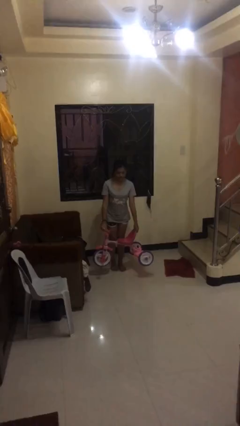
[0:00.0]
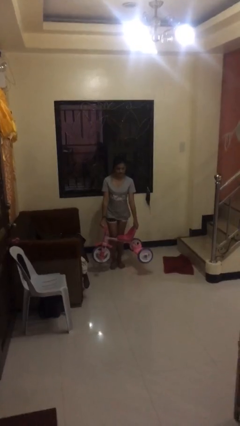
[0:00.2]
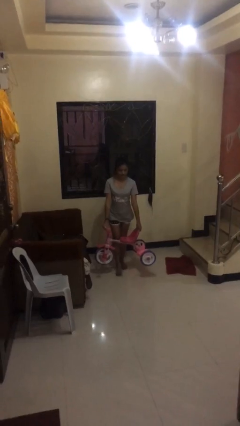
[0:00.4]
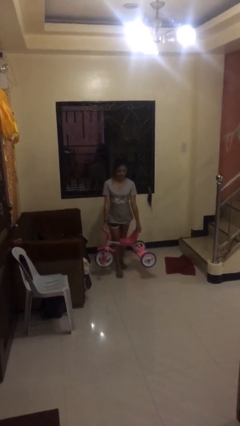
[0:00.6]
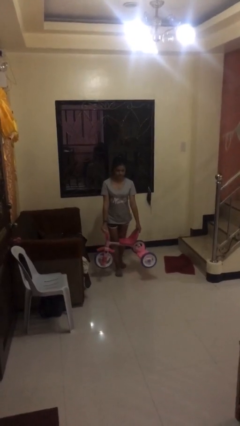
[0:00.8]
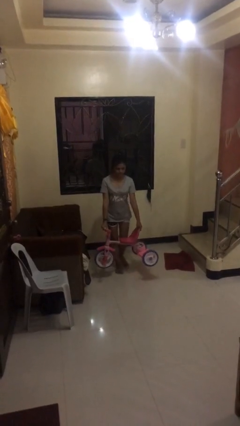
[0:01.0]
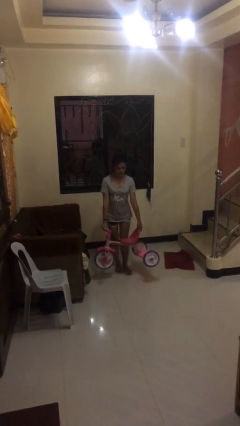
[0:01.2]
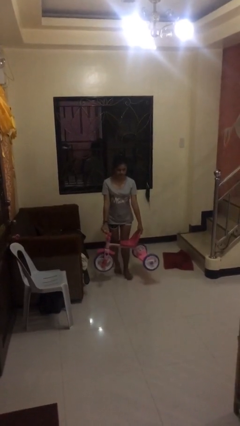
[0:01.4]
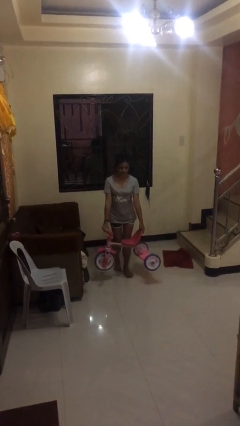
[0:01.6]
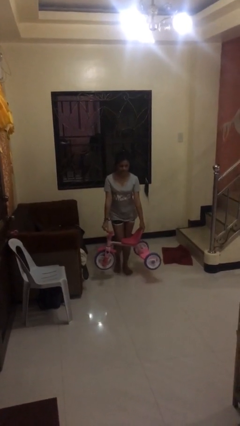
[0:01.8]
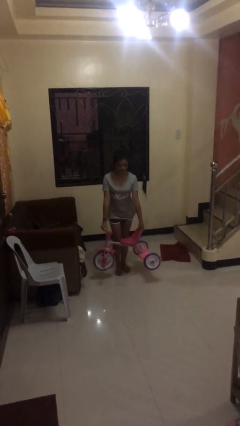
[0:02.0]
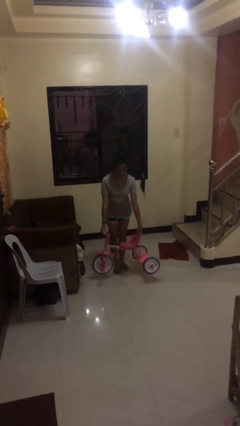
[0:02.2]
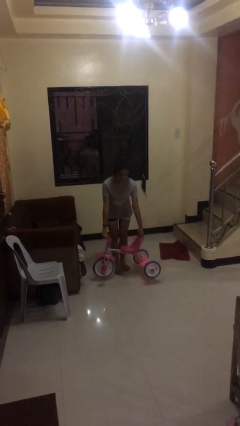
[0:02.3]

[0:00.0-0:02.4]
person carries heavy object

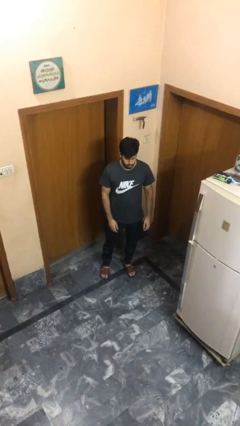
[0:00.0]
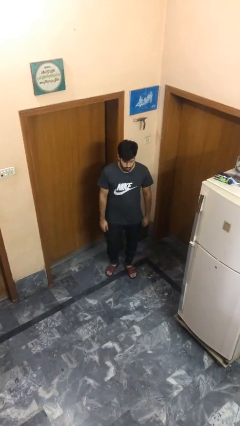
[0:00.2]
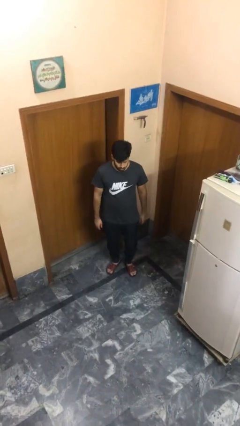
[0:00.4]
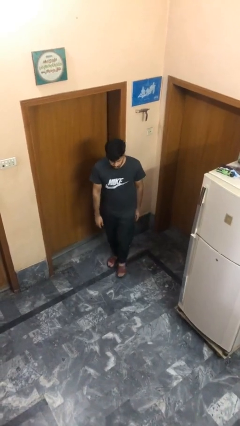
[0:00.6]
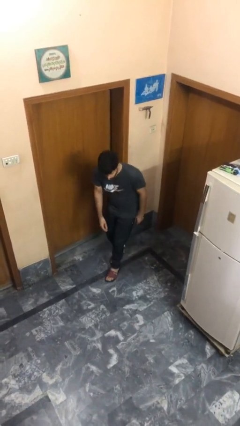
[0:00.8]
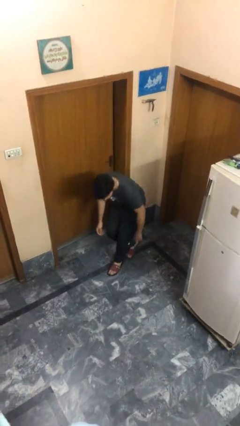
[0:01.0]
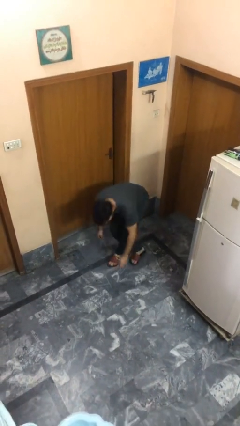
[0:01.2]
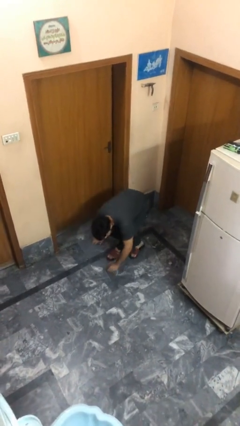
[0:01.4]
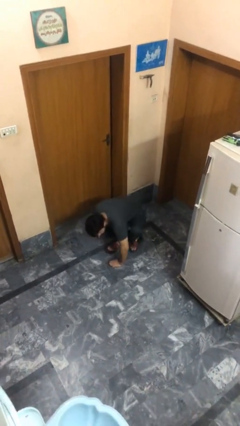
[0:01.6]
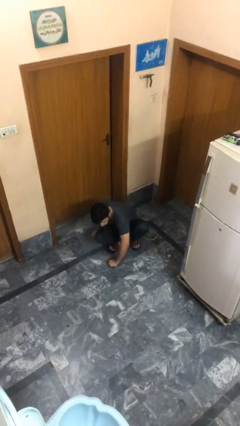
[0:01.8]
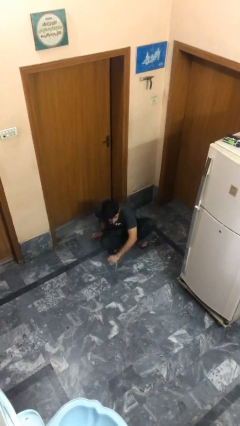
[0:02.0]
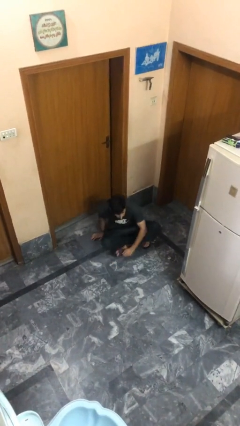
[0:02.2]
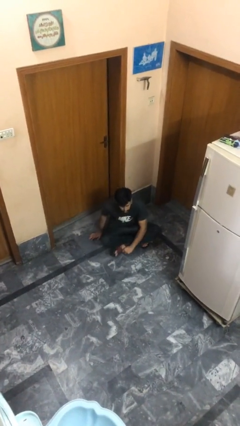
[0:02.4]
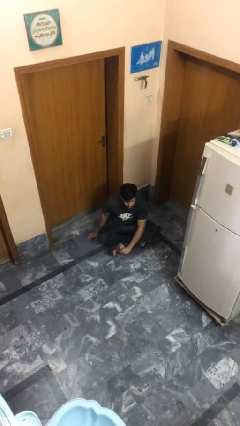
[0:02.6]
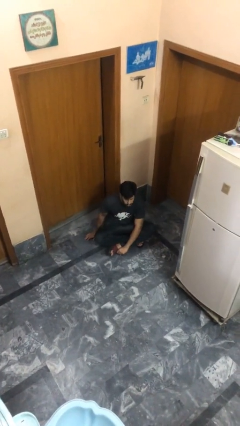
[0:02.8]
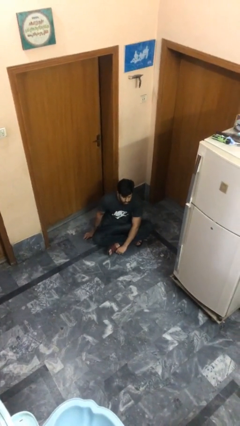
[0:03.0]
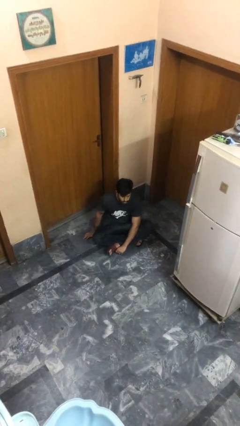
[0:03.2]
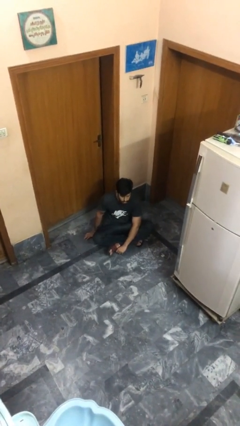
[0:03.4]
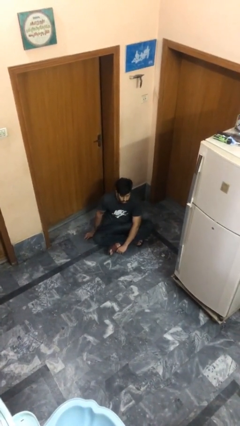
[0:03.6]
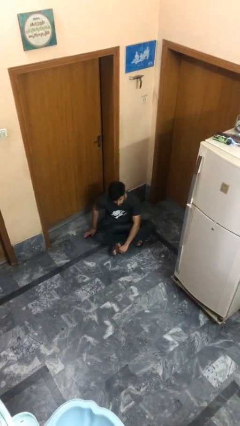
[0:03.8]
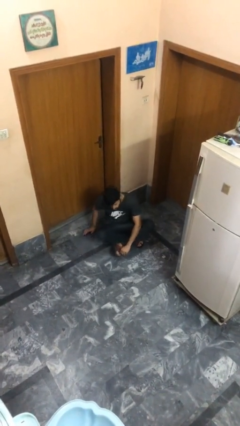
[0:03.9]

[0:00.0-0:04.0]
person sits crisscross

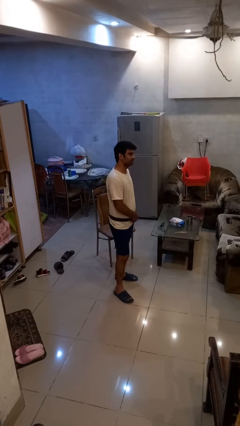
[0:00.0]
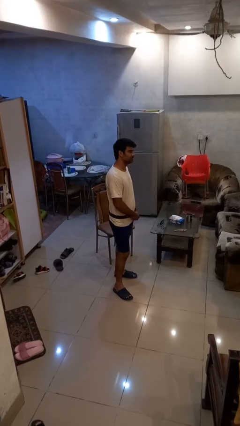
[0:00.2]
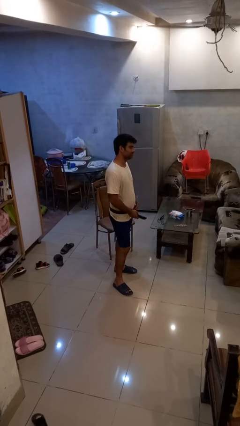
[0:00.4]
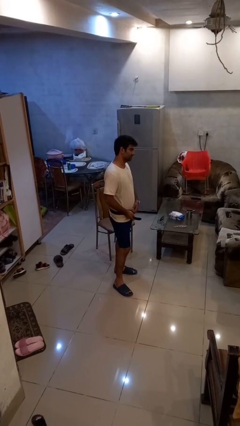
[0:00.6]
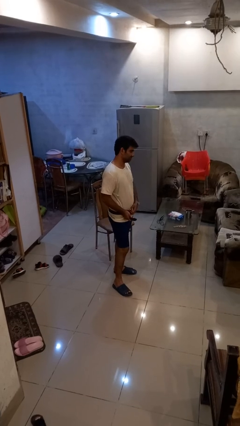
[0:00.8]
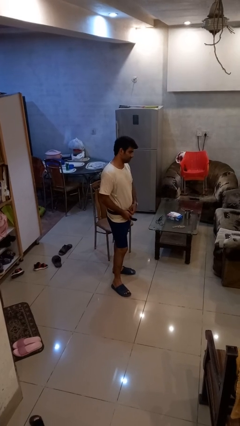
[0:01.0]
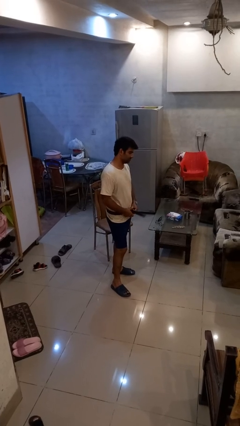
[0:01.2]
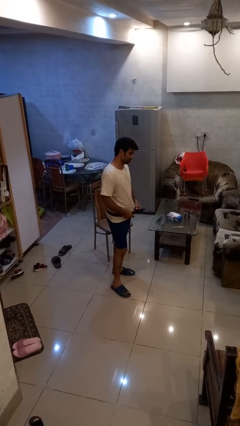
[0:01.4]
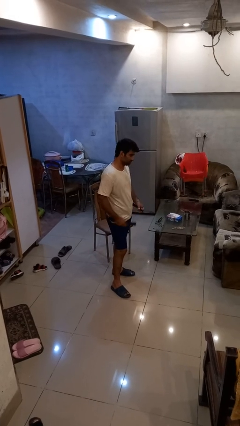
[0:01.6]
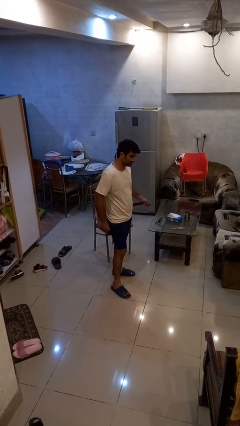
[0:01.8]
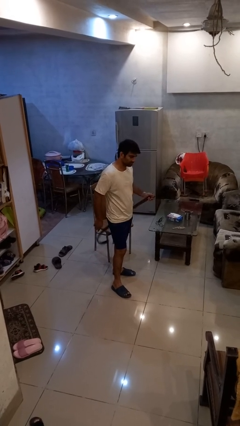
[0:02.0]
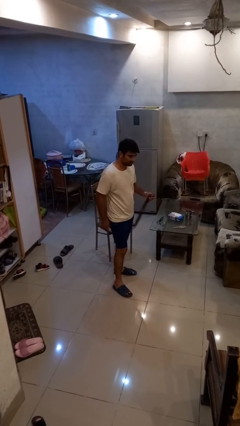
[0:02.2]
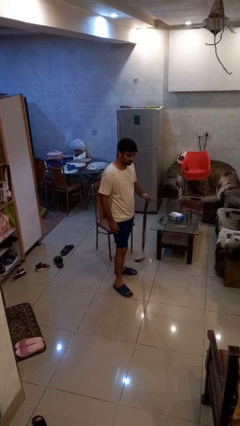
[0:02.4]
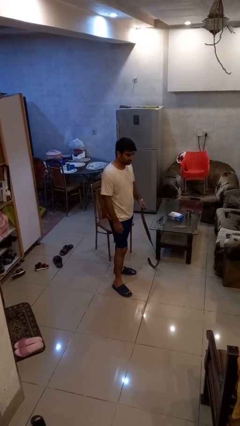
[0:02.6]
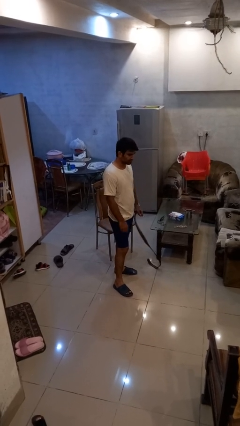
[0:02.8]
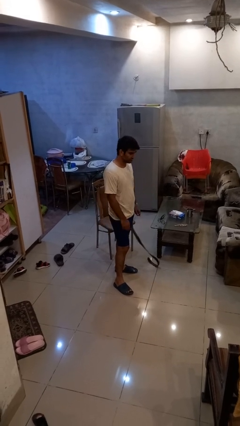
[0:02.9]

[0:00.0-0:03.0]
person takes off belt

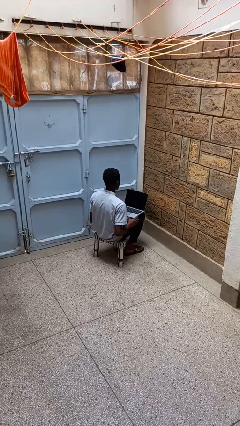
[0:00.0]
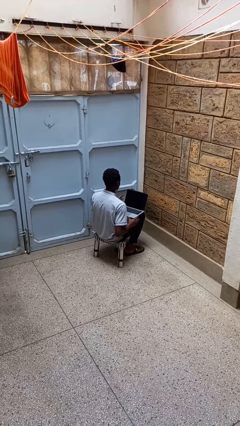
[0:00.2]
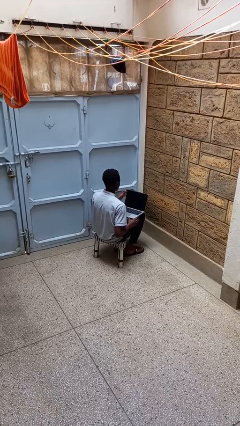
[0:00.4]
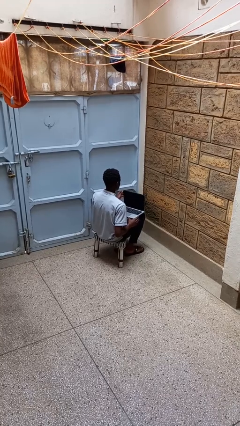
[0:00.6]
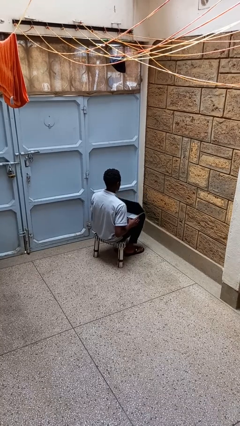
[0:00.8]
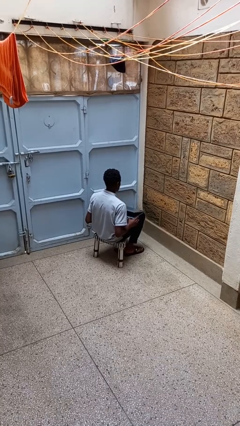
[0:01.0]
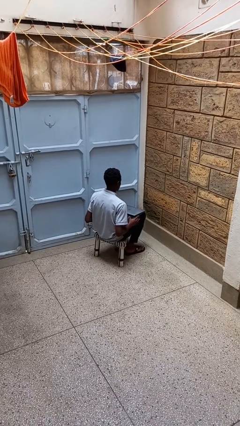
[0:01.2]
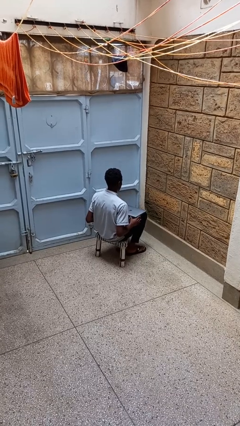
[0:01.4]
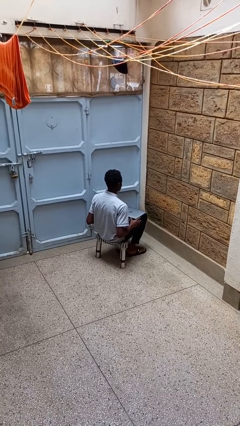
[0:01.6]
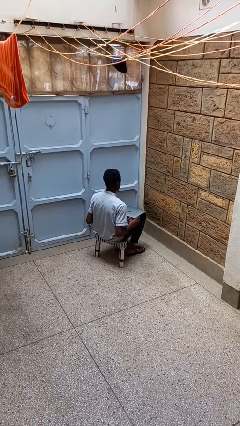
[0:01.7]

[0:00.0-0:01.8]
person closes laptop

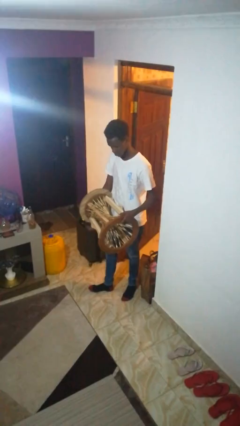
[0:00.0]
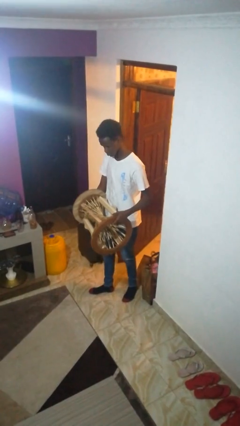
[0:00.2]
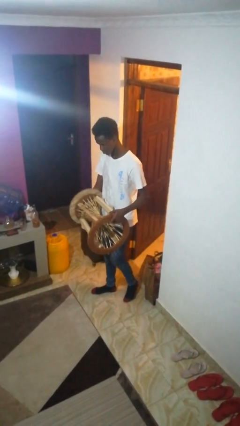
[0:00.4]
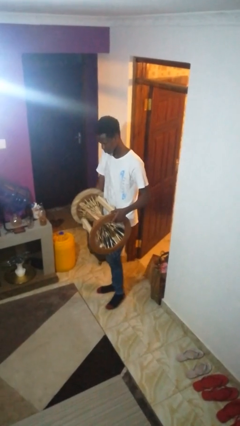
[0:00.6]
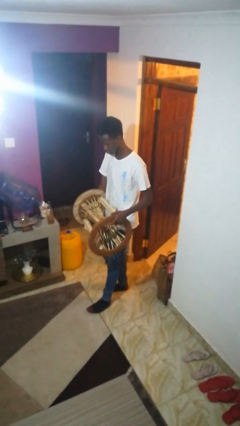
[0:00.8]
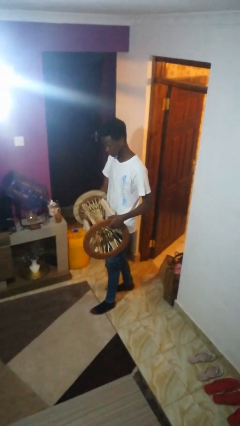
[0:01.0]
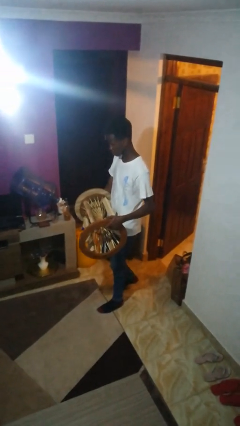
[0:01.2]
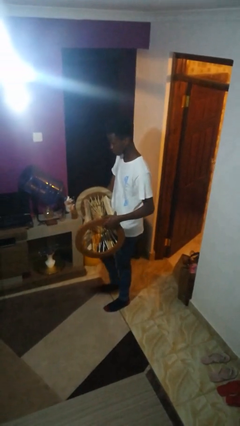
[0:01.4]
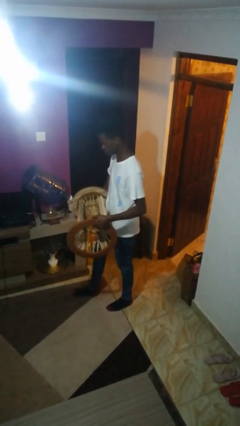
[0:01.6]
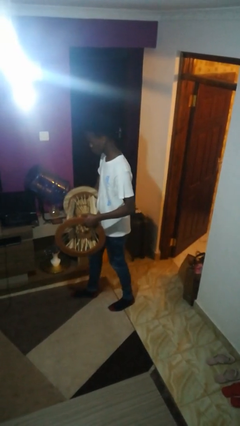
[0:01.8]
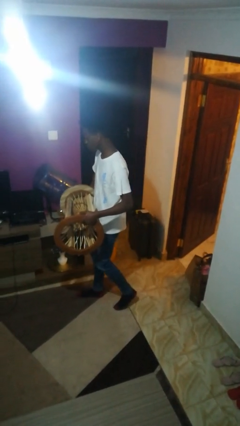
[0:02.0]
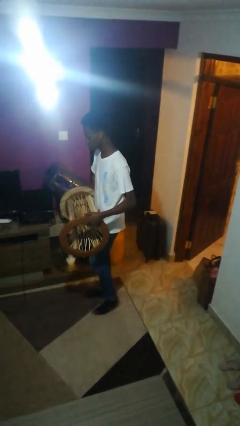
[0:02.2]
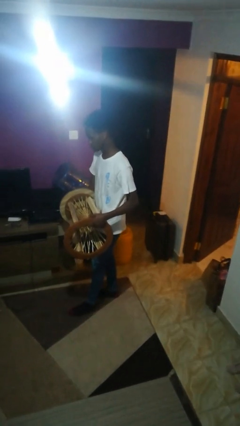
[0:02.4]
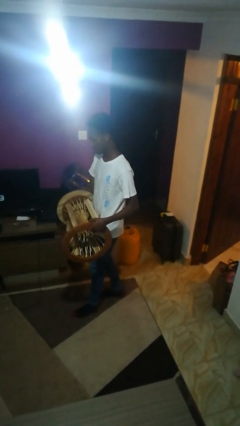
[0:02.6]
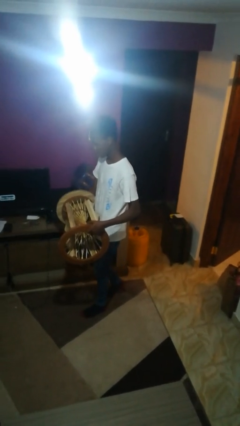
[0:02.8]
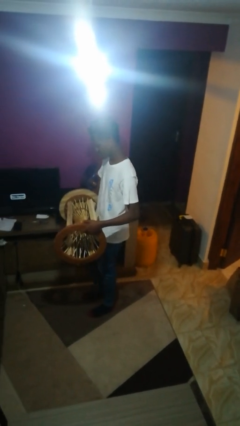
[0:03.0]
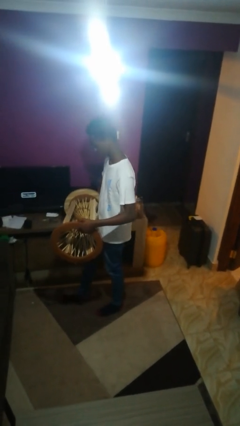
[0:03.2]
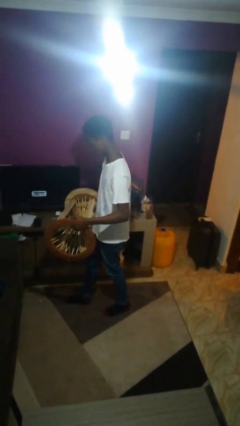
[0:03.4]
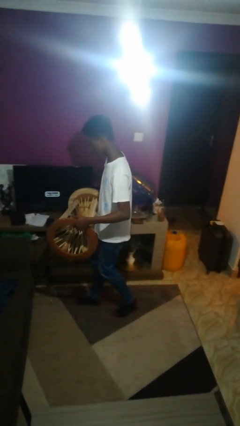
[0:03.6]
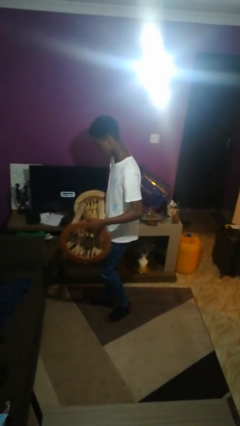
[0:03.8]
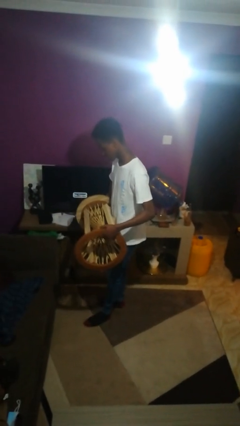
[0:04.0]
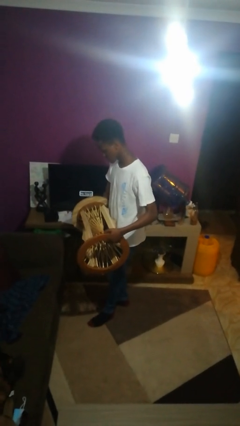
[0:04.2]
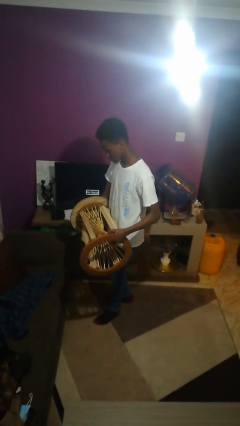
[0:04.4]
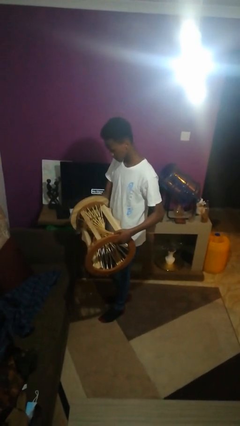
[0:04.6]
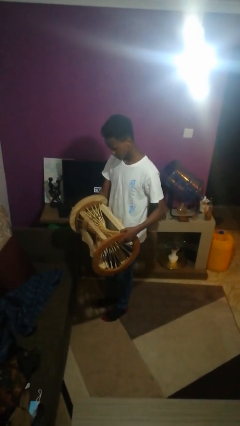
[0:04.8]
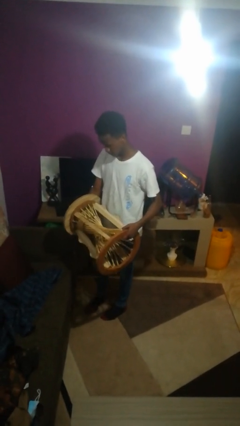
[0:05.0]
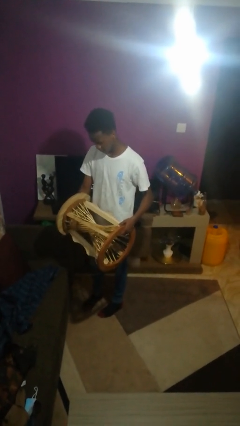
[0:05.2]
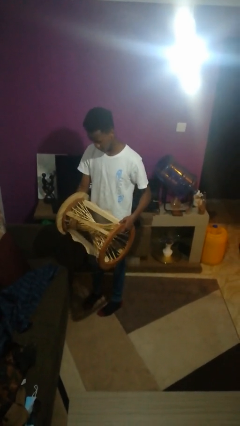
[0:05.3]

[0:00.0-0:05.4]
person carries furniture

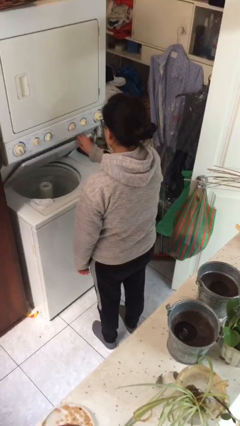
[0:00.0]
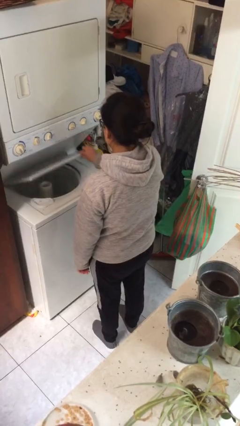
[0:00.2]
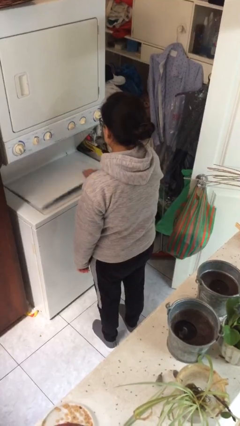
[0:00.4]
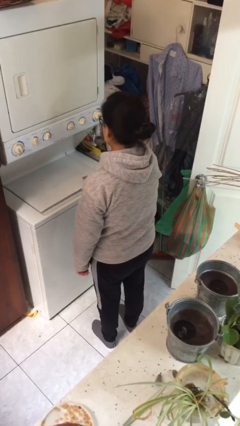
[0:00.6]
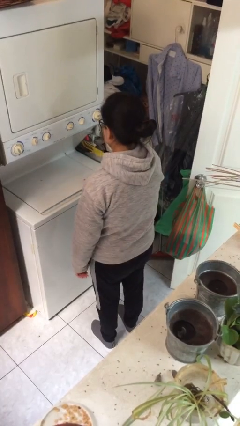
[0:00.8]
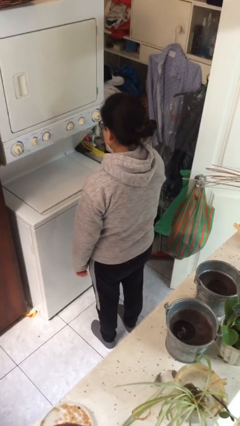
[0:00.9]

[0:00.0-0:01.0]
person closes clothes washer

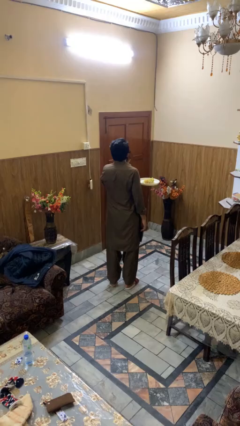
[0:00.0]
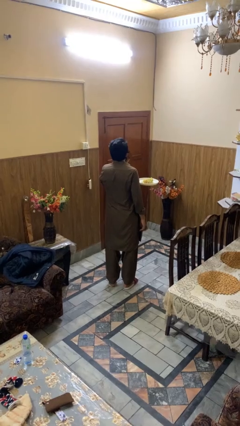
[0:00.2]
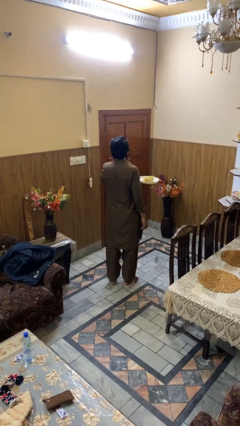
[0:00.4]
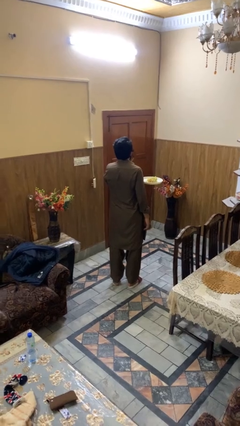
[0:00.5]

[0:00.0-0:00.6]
person eats with hands
